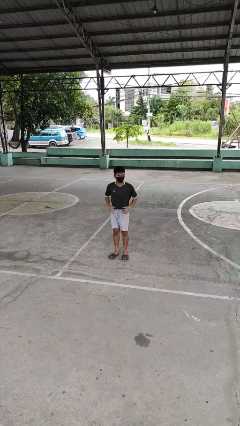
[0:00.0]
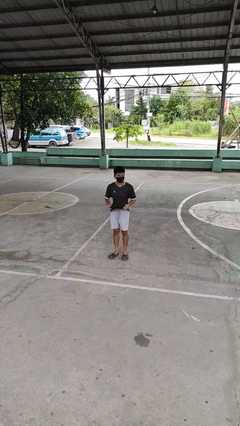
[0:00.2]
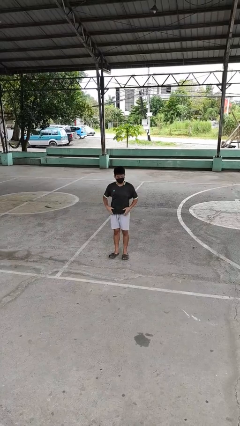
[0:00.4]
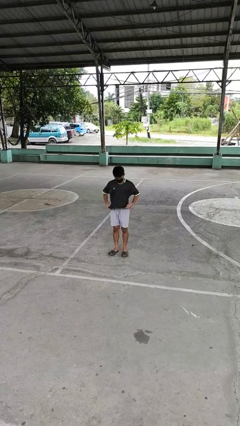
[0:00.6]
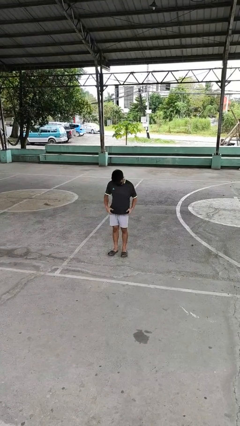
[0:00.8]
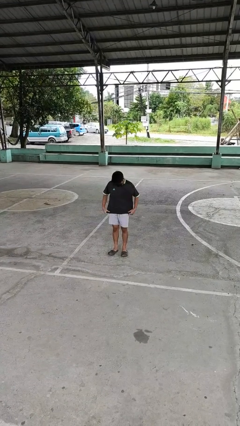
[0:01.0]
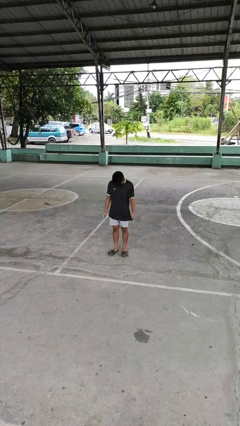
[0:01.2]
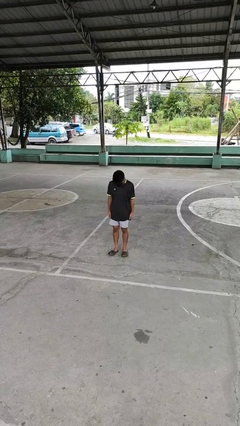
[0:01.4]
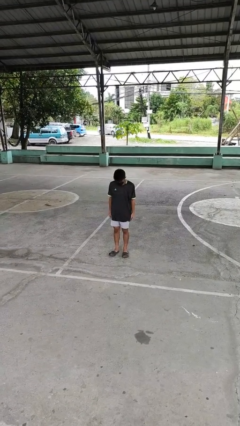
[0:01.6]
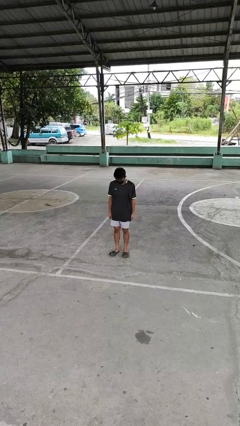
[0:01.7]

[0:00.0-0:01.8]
person untucks shirt

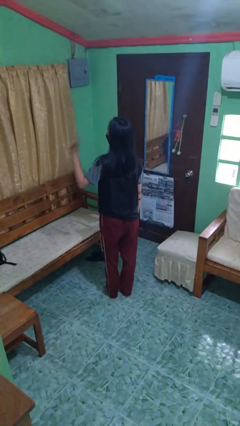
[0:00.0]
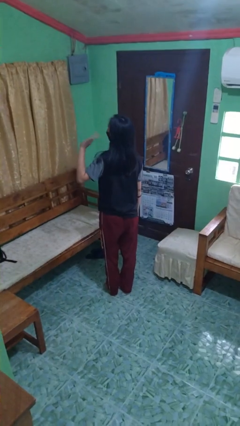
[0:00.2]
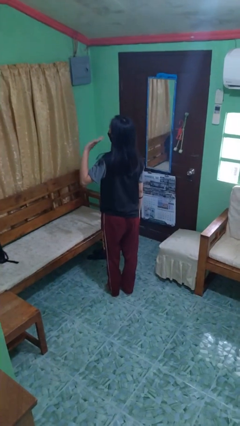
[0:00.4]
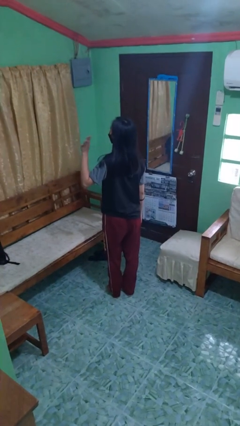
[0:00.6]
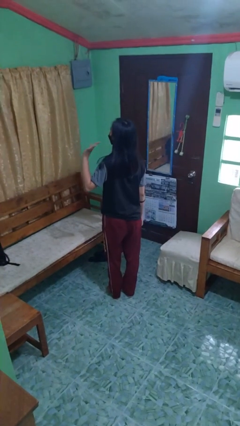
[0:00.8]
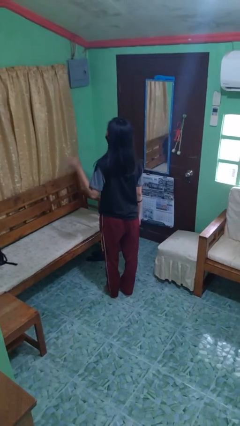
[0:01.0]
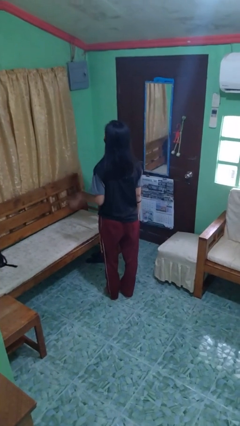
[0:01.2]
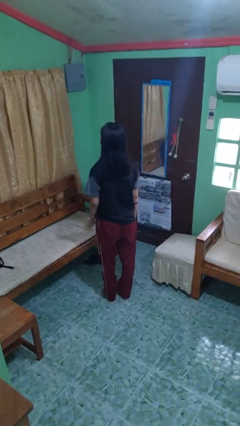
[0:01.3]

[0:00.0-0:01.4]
person waves at person

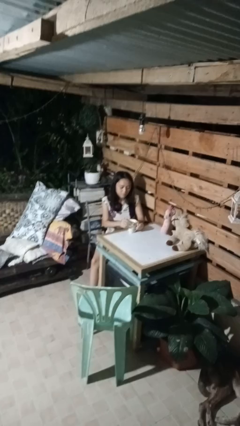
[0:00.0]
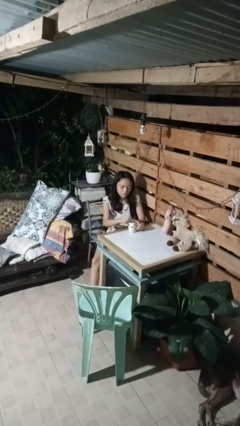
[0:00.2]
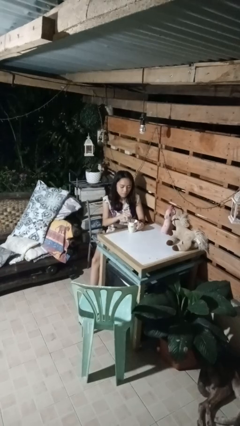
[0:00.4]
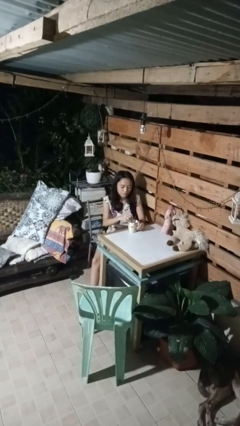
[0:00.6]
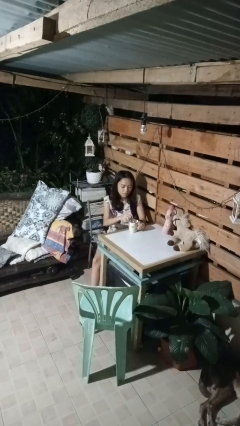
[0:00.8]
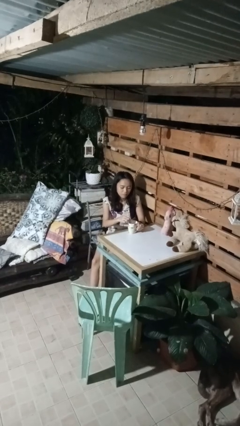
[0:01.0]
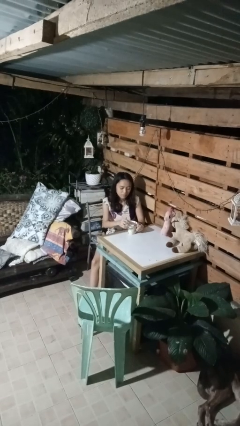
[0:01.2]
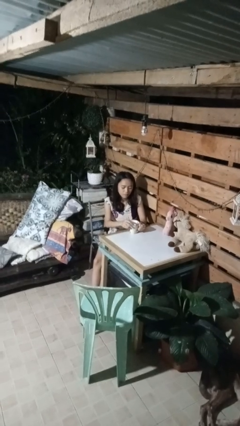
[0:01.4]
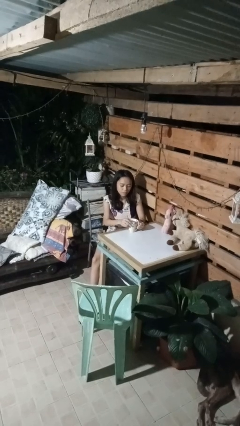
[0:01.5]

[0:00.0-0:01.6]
person stirs mug

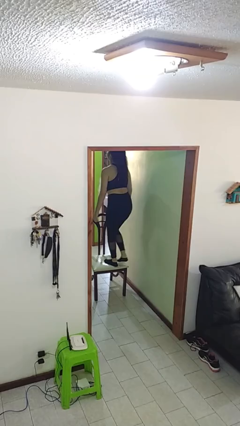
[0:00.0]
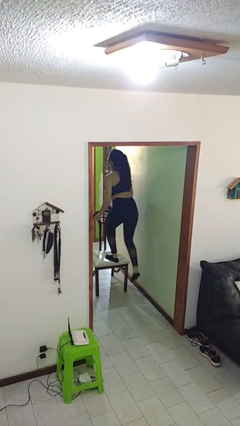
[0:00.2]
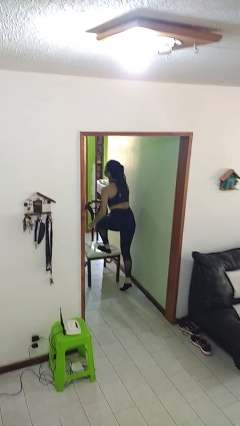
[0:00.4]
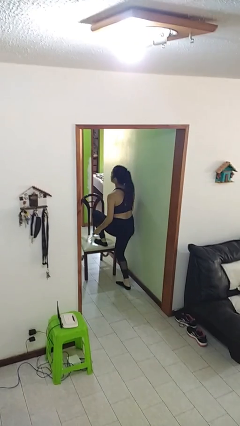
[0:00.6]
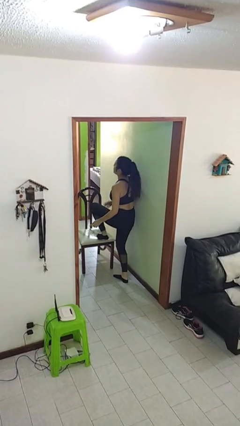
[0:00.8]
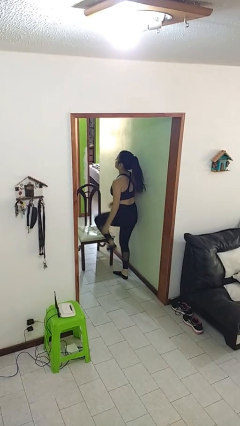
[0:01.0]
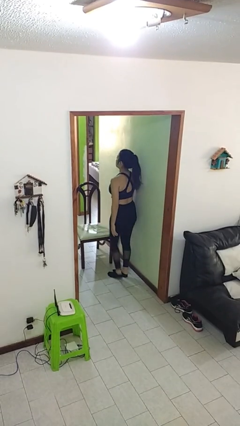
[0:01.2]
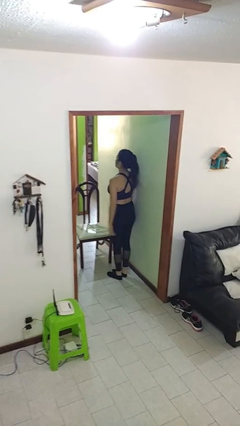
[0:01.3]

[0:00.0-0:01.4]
person climbs off chair

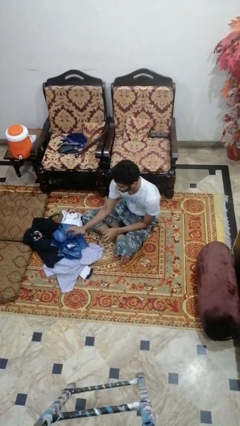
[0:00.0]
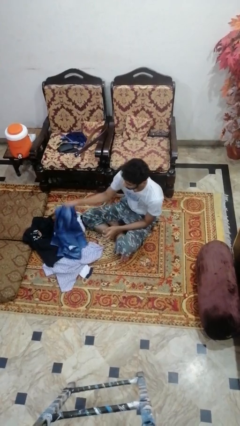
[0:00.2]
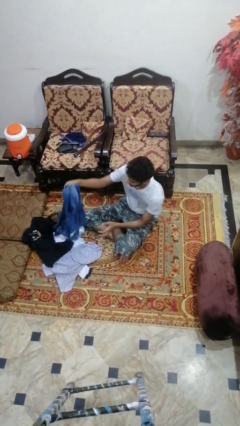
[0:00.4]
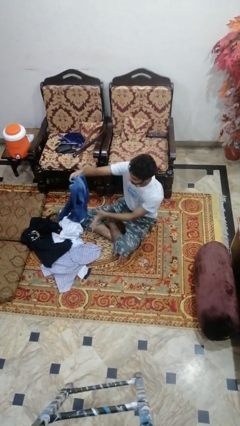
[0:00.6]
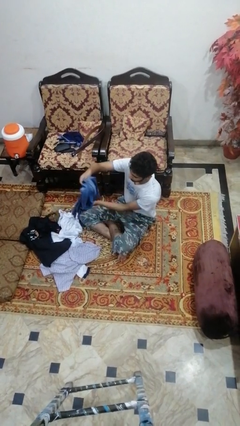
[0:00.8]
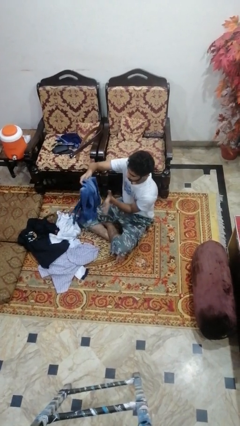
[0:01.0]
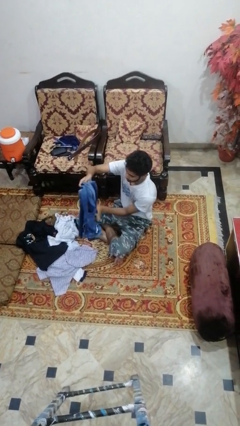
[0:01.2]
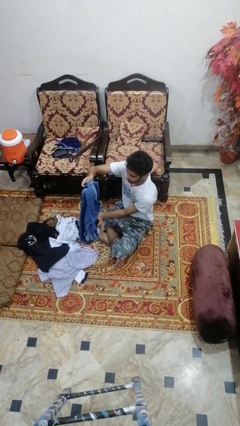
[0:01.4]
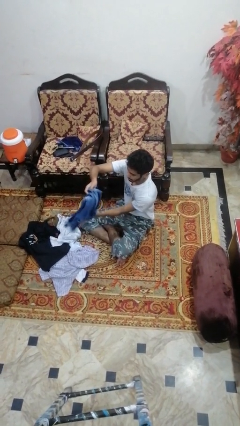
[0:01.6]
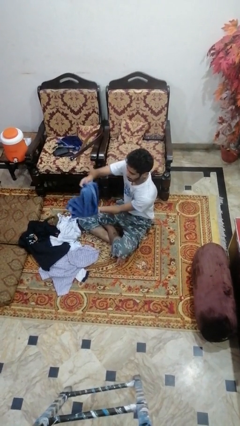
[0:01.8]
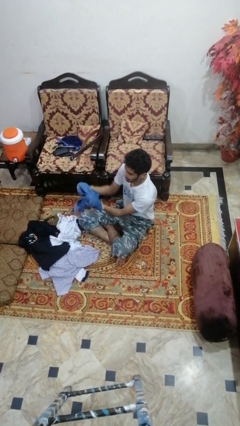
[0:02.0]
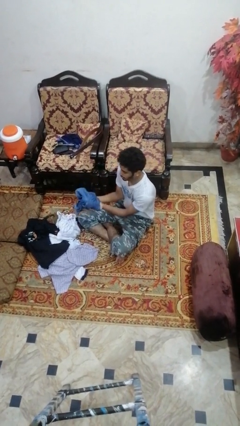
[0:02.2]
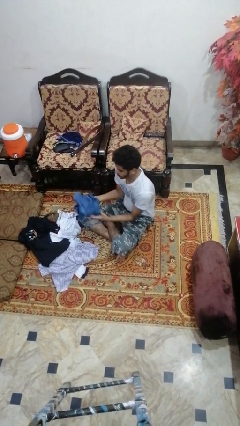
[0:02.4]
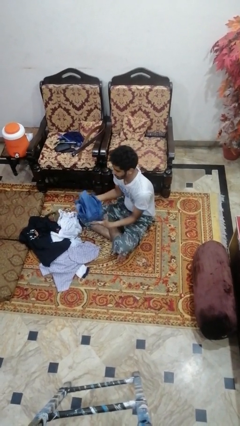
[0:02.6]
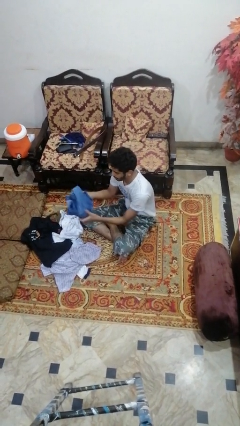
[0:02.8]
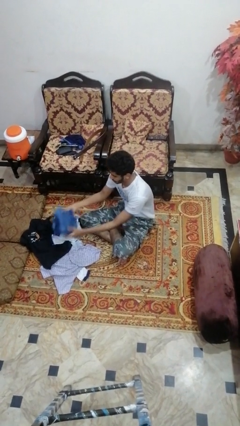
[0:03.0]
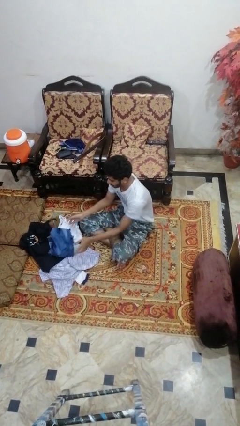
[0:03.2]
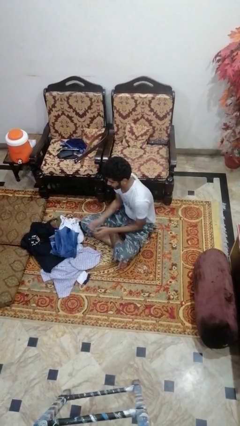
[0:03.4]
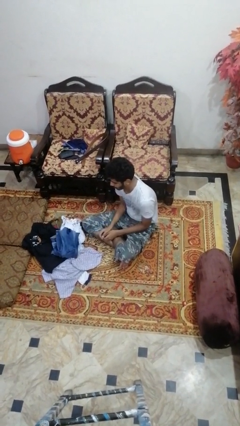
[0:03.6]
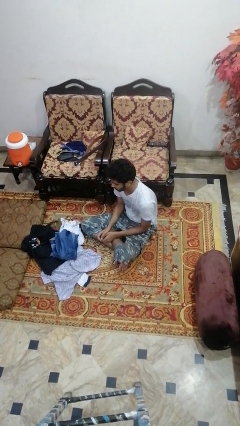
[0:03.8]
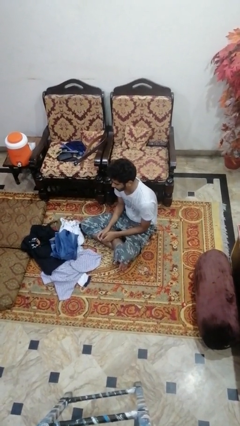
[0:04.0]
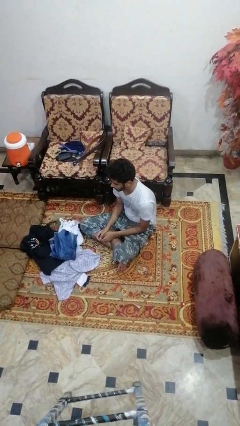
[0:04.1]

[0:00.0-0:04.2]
person folds pants

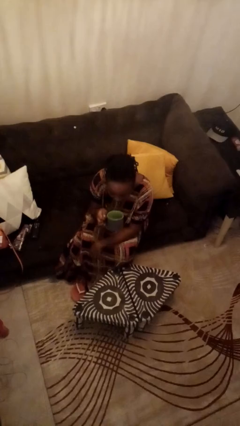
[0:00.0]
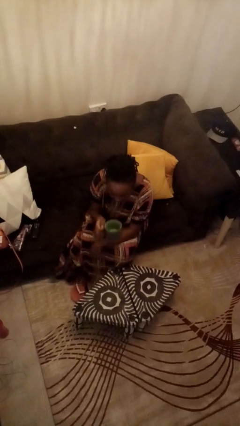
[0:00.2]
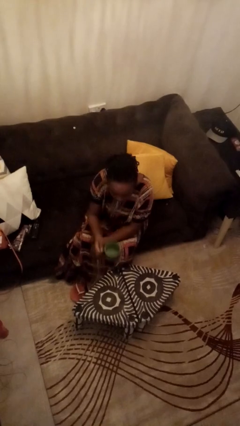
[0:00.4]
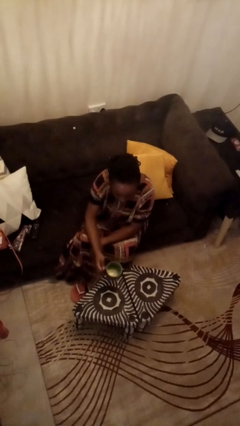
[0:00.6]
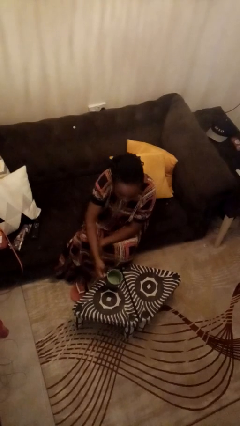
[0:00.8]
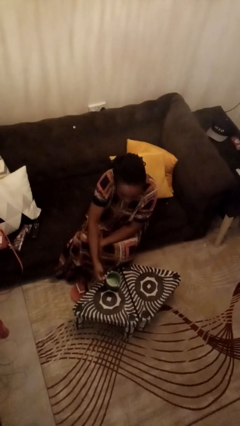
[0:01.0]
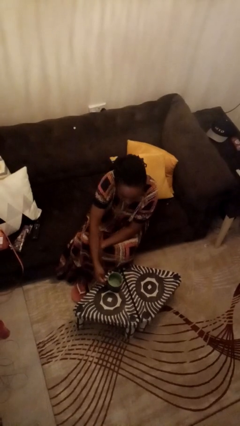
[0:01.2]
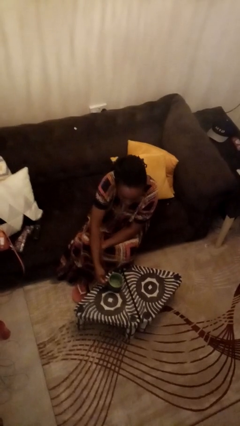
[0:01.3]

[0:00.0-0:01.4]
person puts down object on table

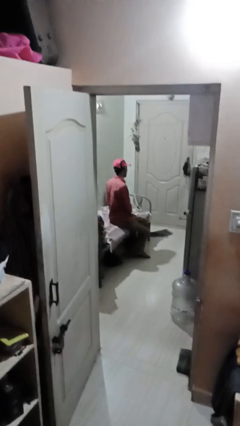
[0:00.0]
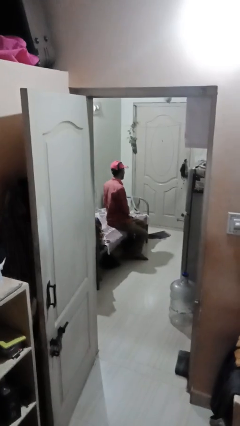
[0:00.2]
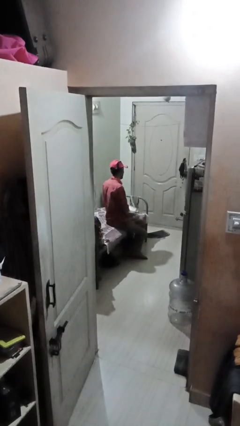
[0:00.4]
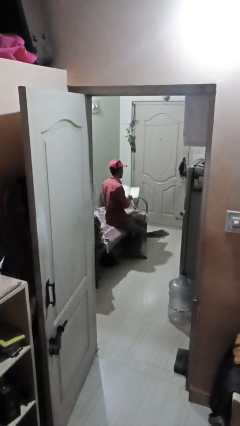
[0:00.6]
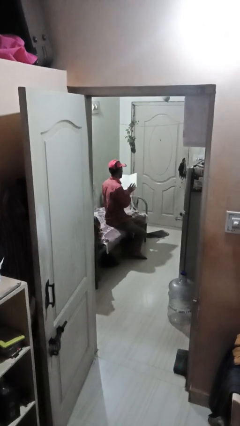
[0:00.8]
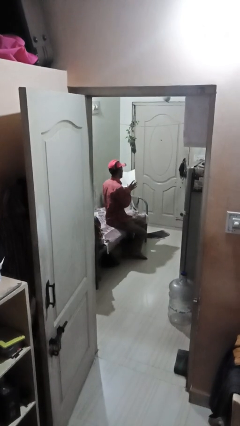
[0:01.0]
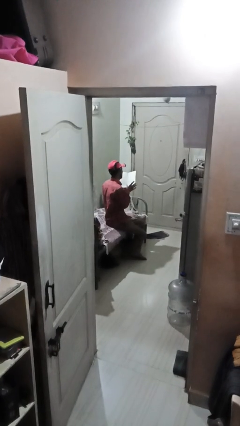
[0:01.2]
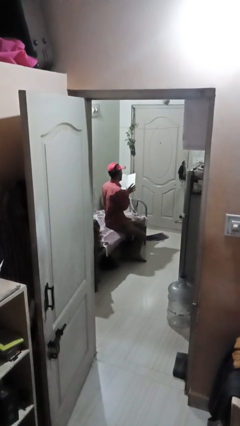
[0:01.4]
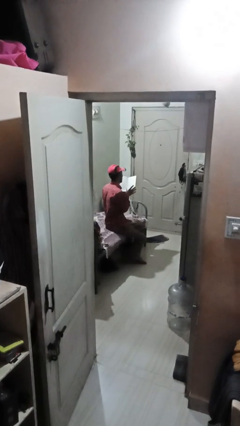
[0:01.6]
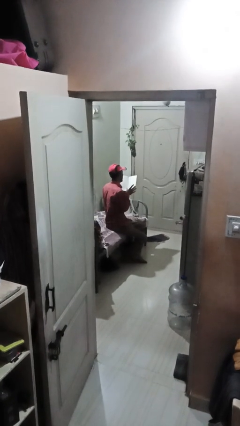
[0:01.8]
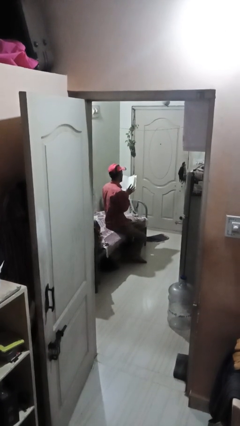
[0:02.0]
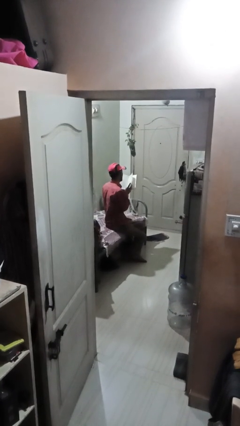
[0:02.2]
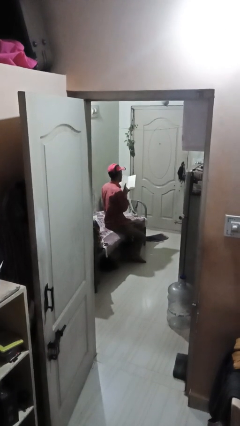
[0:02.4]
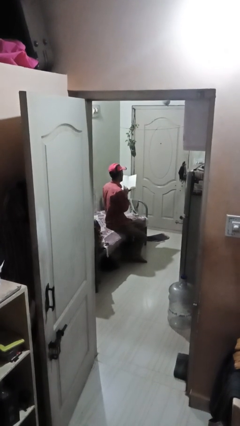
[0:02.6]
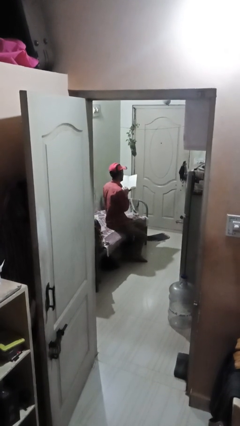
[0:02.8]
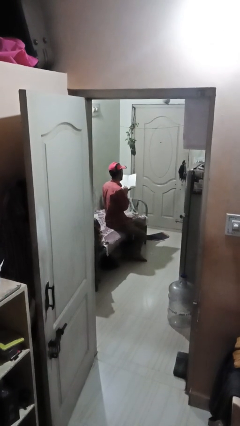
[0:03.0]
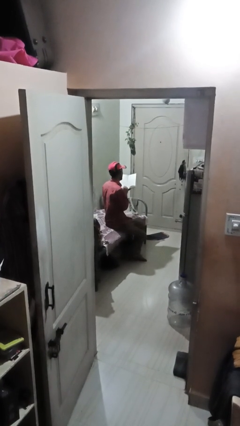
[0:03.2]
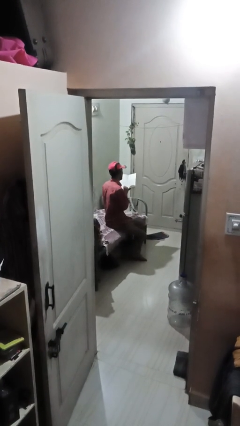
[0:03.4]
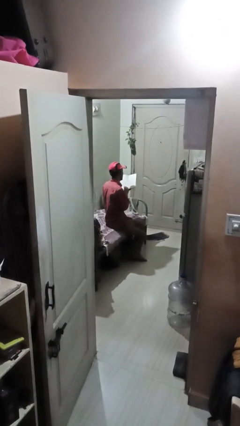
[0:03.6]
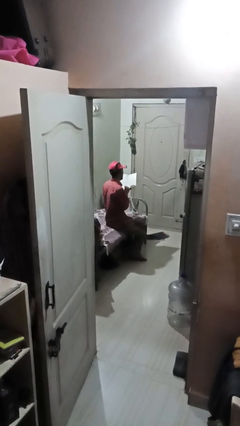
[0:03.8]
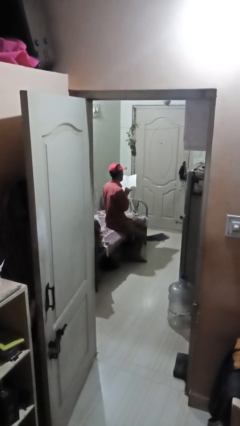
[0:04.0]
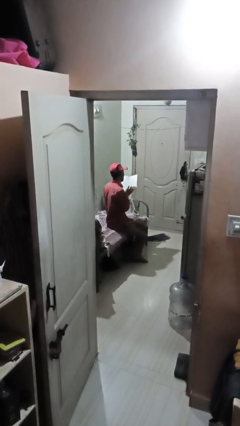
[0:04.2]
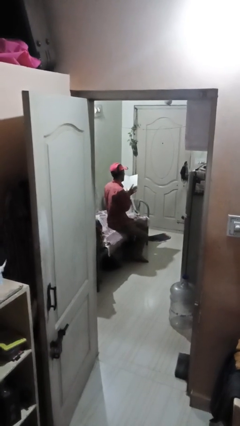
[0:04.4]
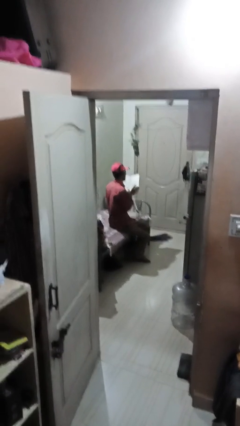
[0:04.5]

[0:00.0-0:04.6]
person reads book

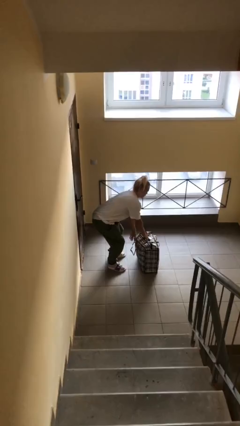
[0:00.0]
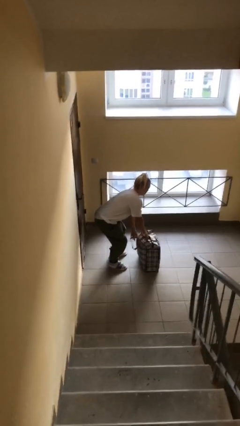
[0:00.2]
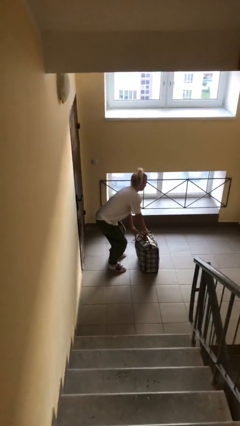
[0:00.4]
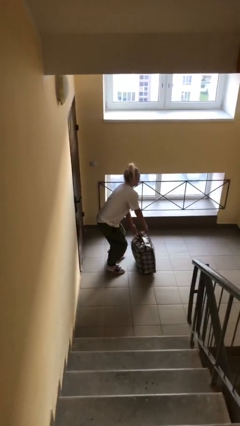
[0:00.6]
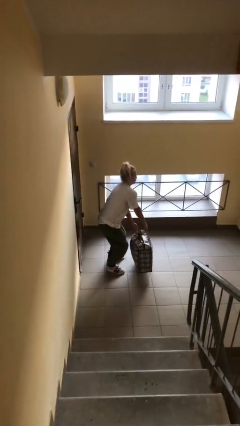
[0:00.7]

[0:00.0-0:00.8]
person picks up object from floor
